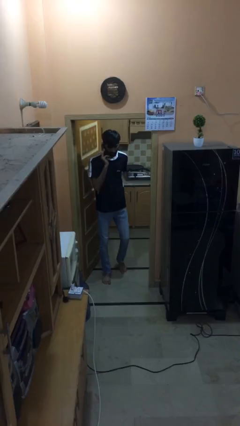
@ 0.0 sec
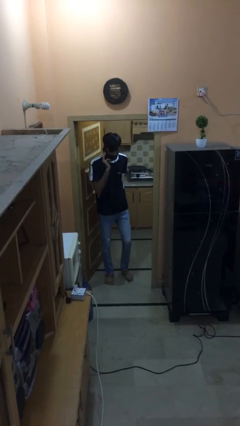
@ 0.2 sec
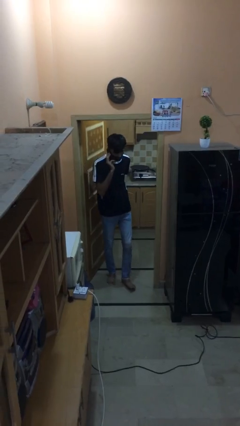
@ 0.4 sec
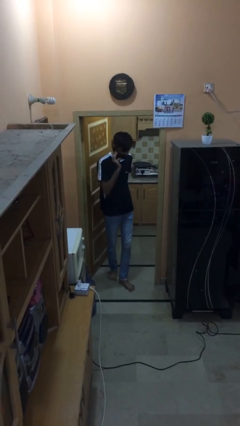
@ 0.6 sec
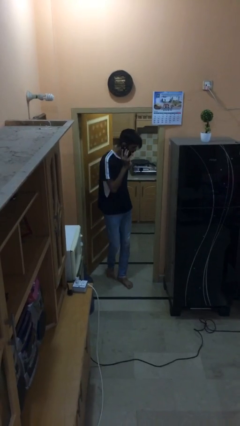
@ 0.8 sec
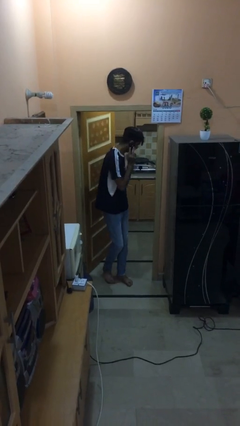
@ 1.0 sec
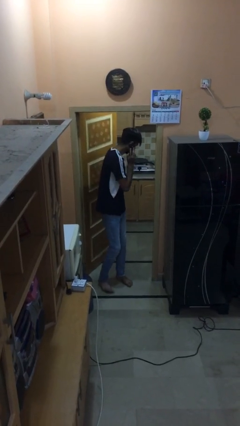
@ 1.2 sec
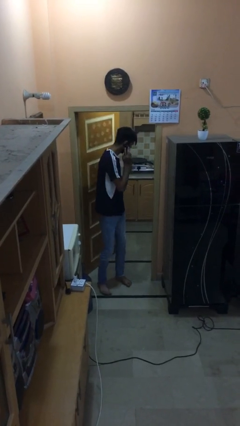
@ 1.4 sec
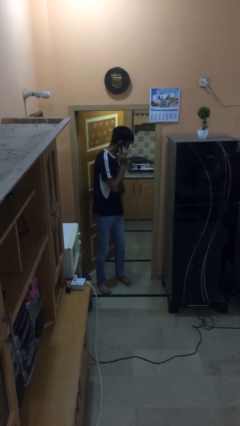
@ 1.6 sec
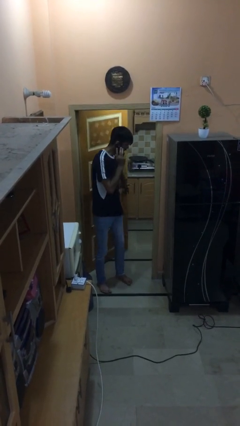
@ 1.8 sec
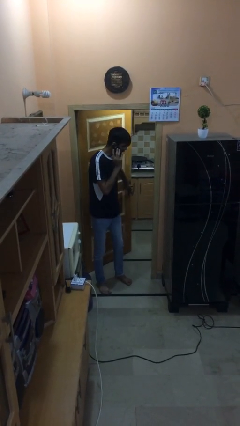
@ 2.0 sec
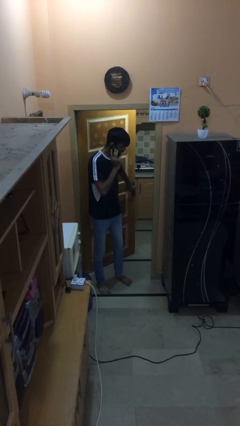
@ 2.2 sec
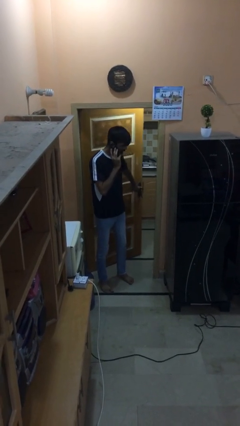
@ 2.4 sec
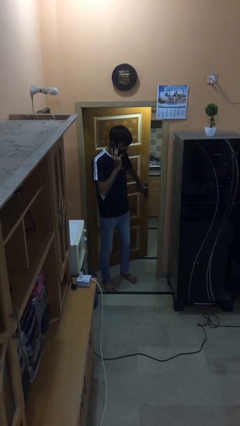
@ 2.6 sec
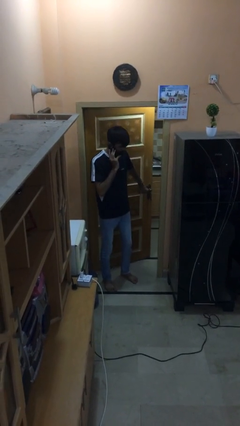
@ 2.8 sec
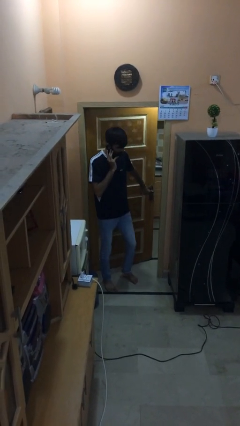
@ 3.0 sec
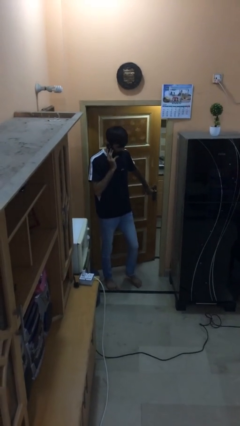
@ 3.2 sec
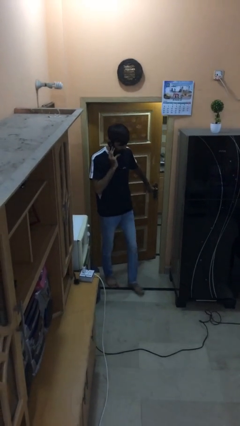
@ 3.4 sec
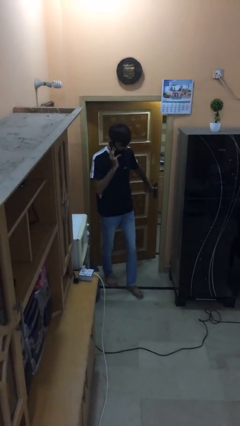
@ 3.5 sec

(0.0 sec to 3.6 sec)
person closes facility door

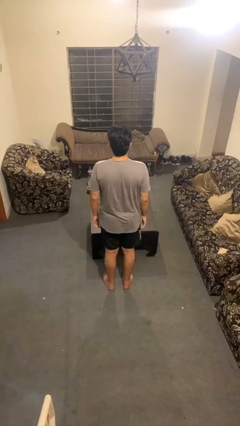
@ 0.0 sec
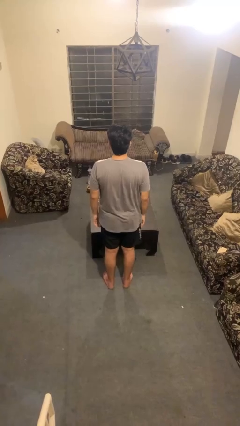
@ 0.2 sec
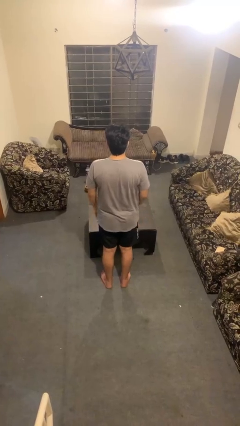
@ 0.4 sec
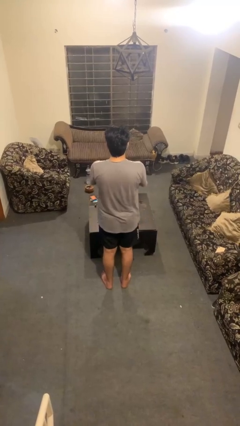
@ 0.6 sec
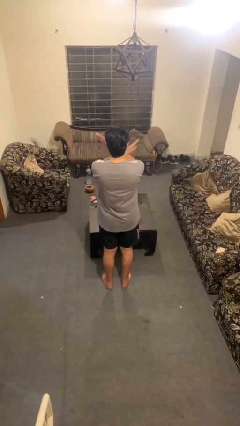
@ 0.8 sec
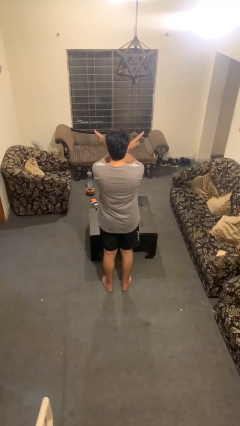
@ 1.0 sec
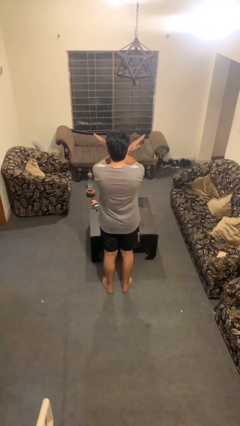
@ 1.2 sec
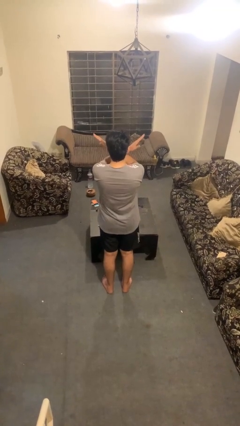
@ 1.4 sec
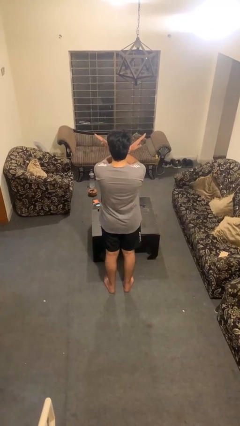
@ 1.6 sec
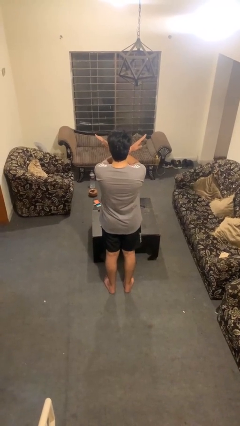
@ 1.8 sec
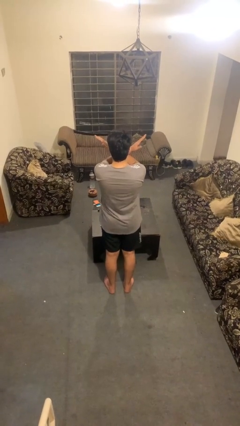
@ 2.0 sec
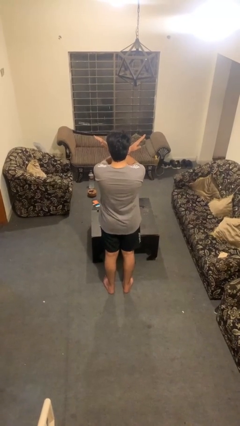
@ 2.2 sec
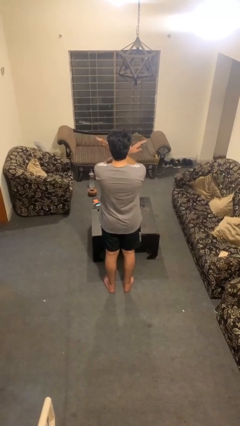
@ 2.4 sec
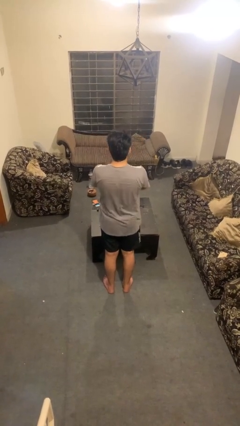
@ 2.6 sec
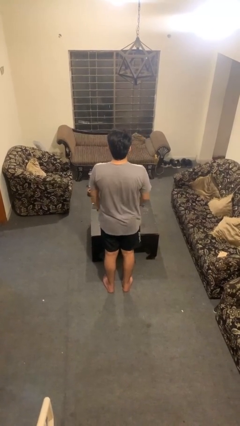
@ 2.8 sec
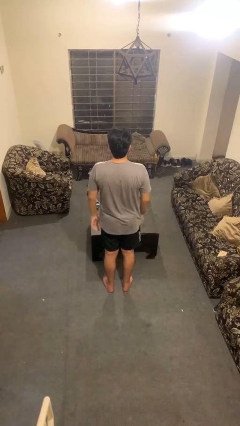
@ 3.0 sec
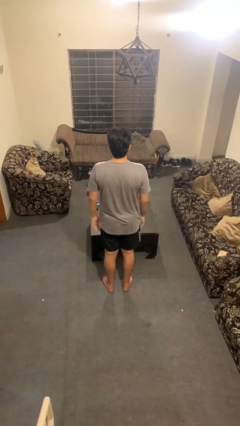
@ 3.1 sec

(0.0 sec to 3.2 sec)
person gestures arms x

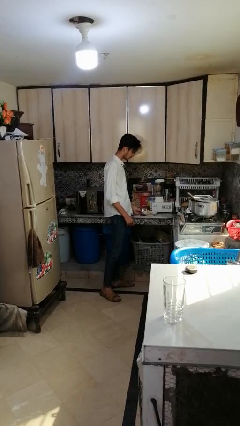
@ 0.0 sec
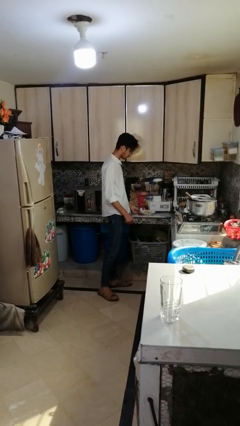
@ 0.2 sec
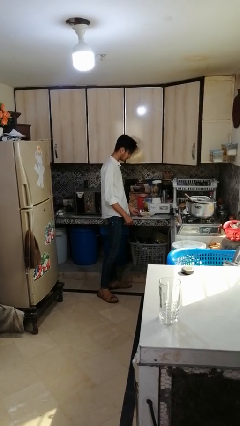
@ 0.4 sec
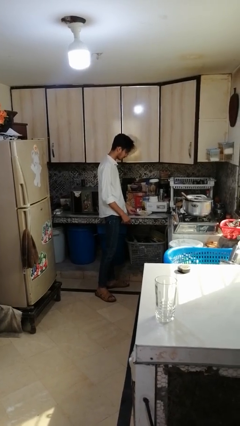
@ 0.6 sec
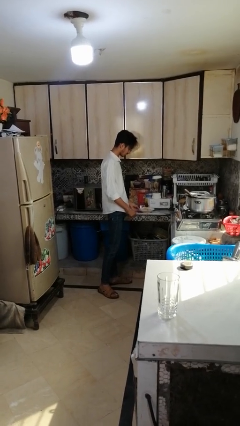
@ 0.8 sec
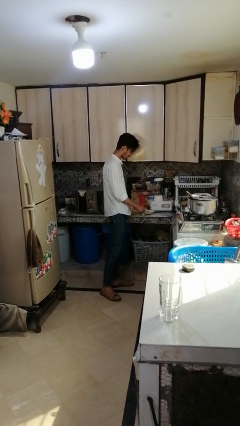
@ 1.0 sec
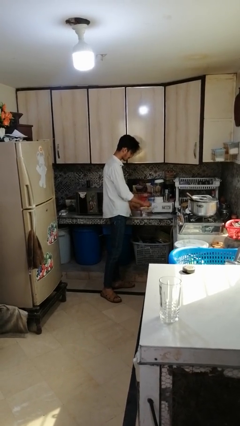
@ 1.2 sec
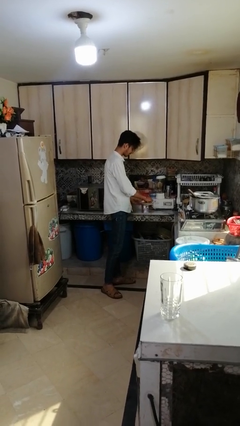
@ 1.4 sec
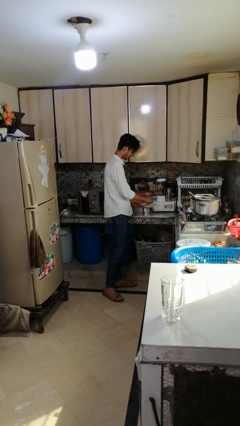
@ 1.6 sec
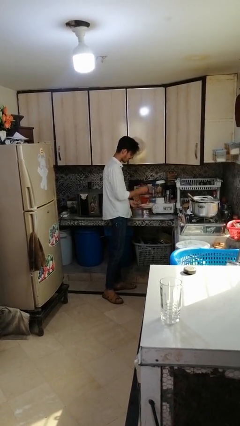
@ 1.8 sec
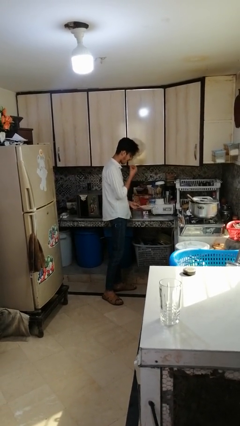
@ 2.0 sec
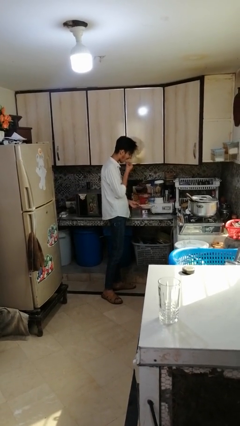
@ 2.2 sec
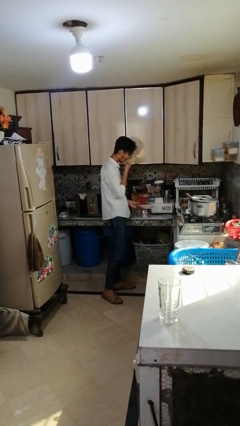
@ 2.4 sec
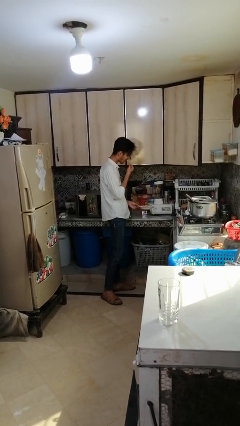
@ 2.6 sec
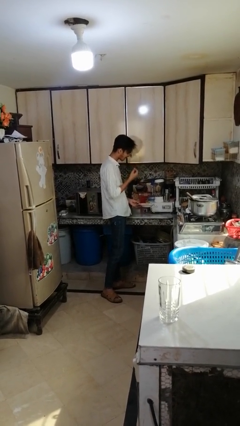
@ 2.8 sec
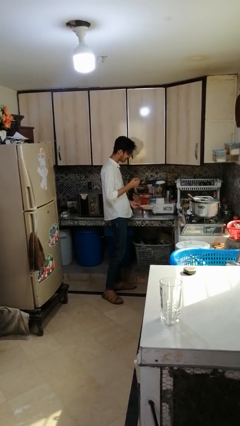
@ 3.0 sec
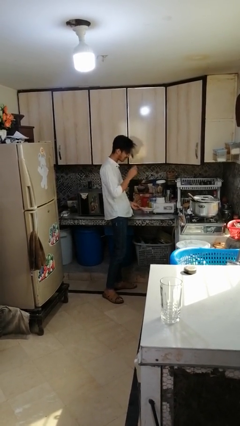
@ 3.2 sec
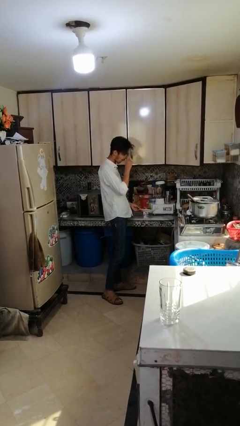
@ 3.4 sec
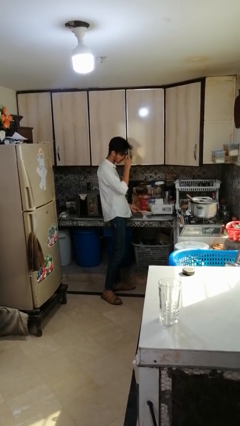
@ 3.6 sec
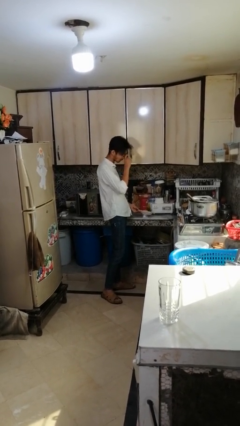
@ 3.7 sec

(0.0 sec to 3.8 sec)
person eats with hands

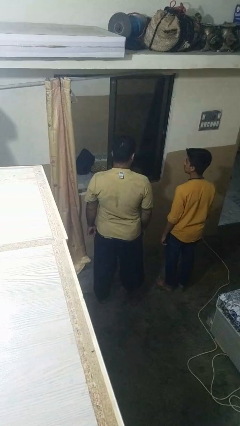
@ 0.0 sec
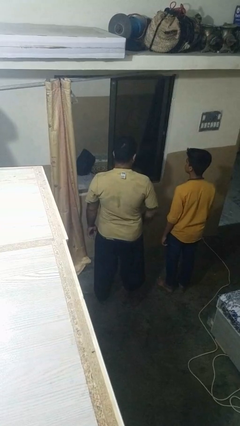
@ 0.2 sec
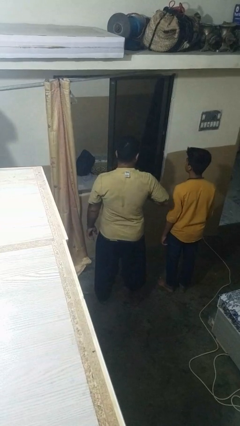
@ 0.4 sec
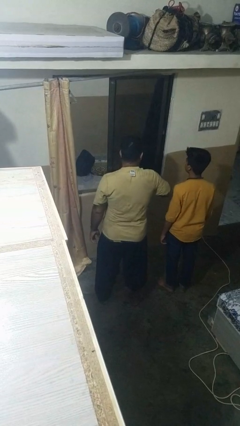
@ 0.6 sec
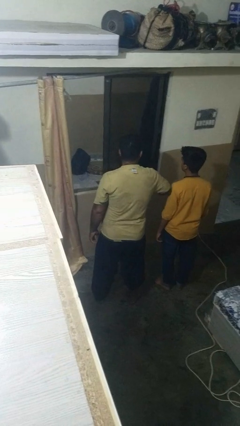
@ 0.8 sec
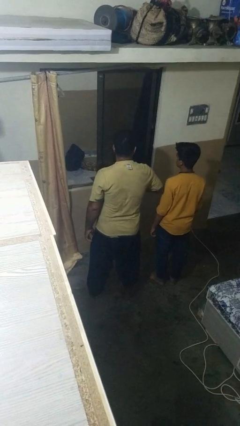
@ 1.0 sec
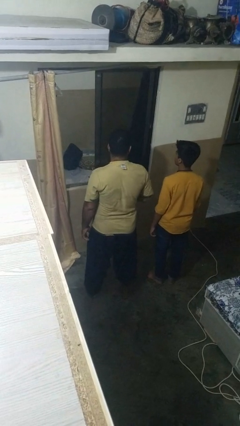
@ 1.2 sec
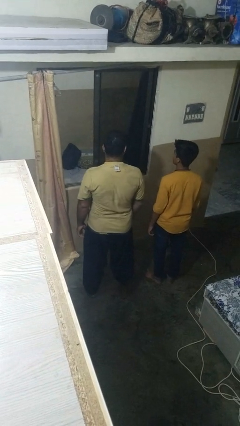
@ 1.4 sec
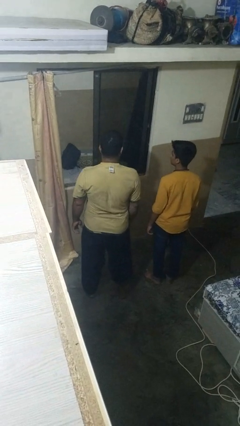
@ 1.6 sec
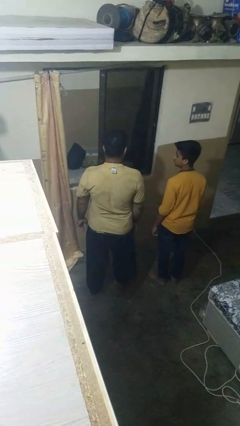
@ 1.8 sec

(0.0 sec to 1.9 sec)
person nudges person with elbow

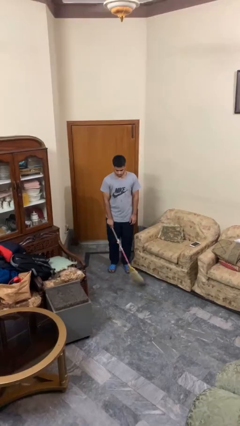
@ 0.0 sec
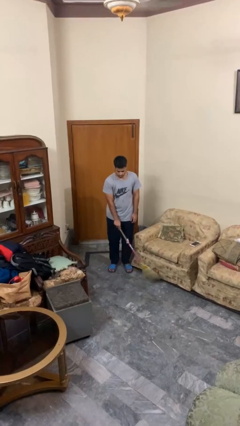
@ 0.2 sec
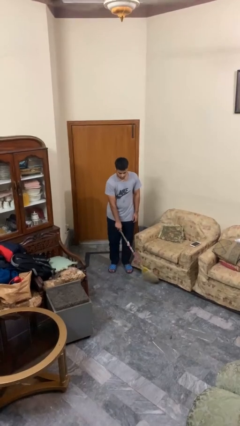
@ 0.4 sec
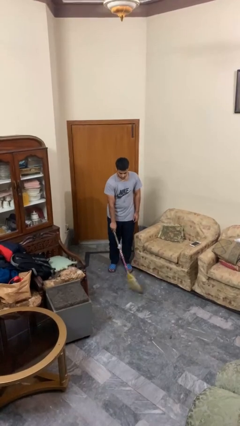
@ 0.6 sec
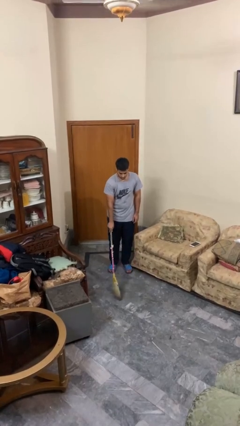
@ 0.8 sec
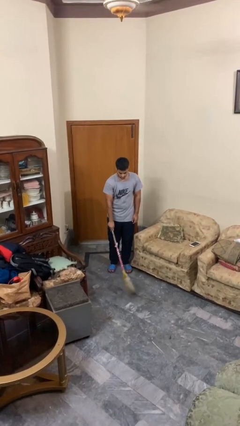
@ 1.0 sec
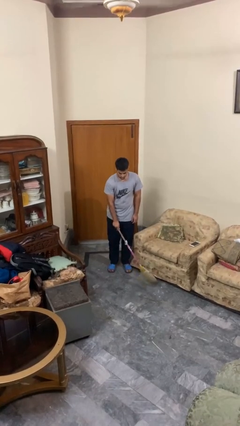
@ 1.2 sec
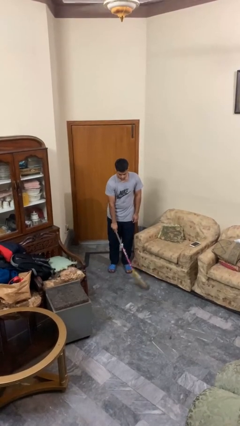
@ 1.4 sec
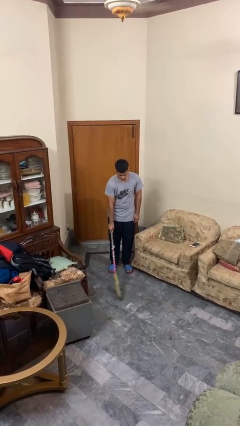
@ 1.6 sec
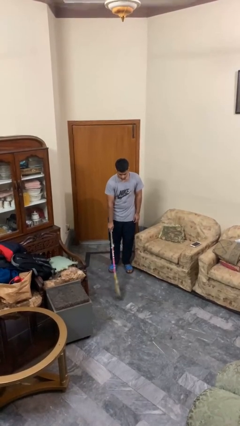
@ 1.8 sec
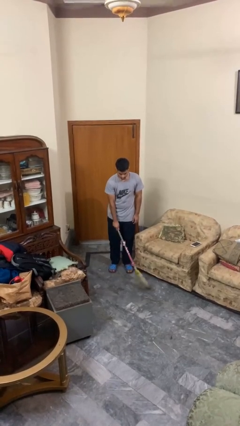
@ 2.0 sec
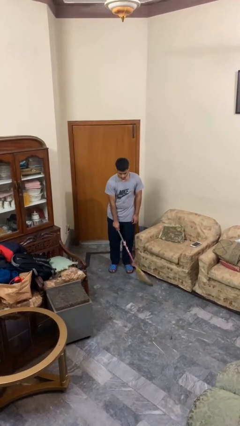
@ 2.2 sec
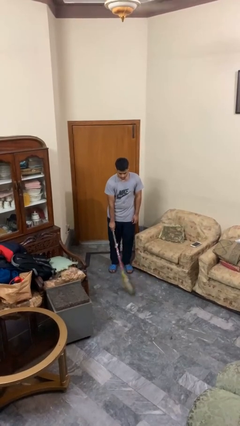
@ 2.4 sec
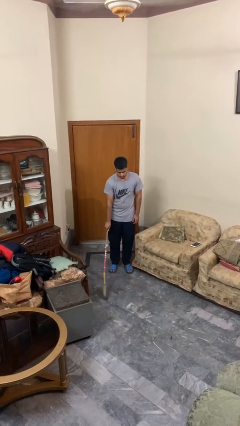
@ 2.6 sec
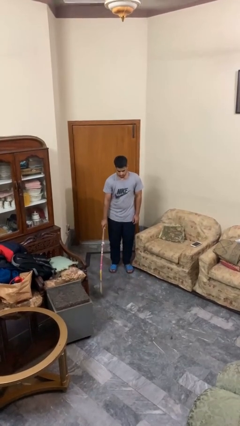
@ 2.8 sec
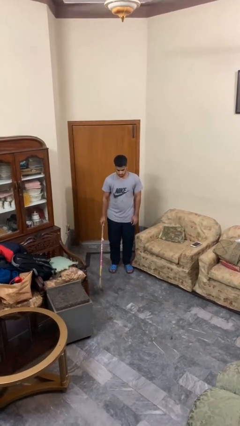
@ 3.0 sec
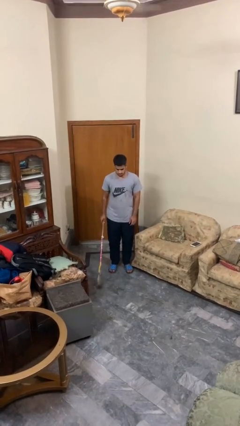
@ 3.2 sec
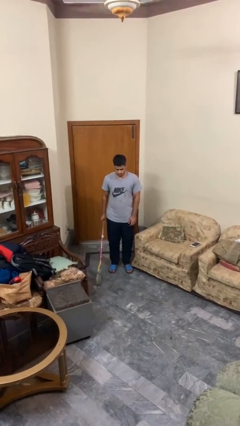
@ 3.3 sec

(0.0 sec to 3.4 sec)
person sweeps floor

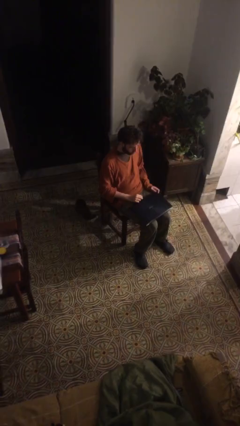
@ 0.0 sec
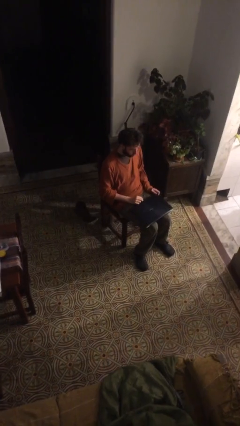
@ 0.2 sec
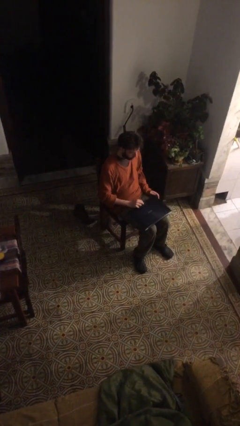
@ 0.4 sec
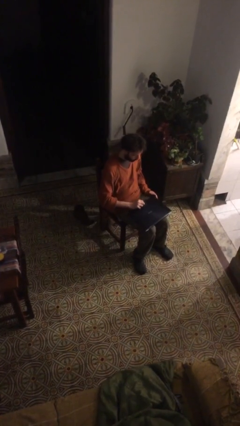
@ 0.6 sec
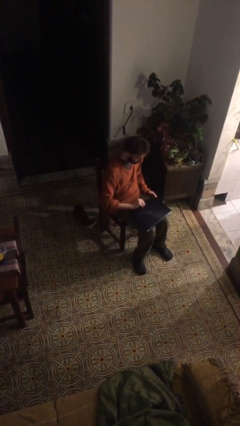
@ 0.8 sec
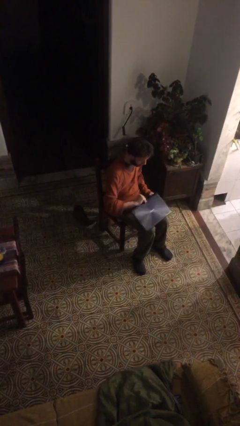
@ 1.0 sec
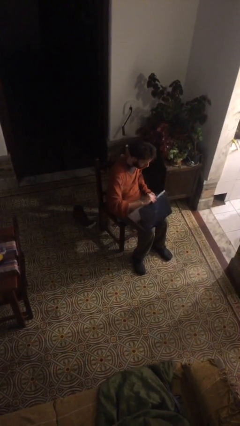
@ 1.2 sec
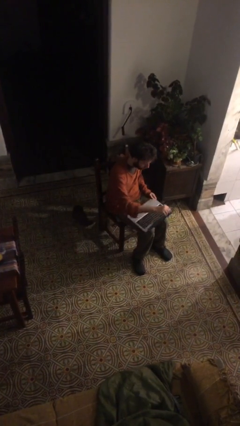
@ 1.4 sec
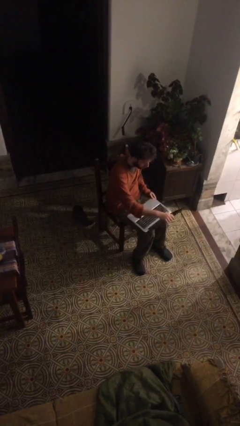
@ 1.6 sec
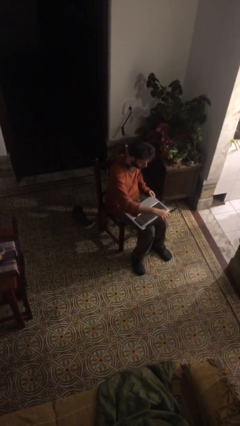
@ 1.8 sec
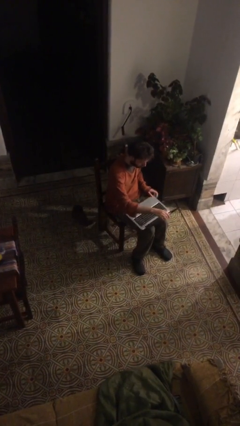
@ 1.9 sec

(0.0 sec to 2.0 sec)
person opens laptop
